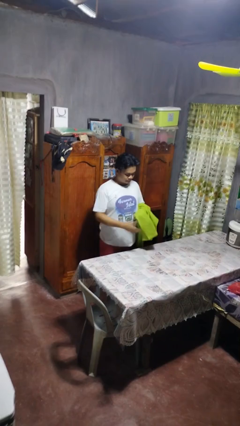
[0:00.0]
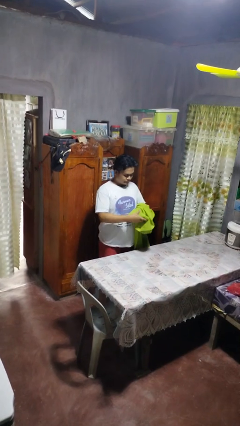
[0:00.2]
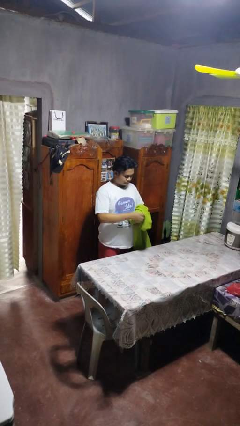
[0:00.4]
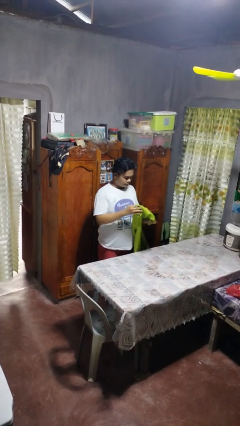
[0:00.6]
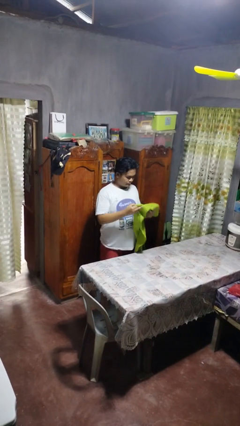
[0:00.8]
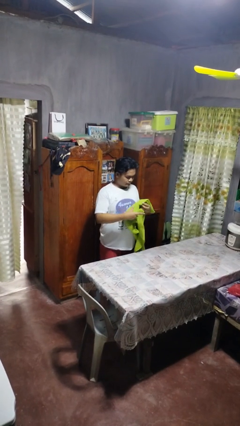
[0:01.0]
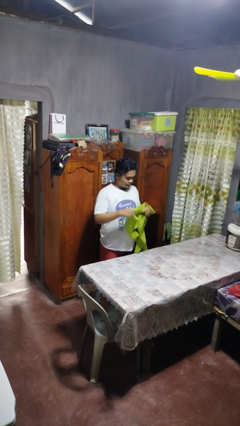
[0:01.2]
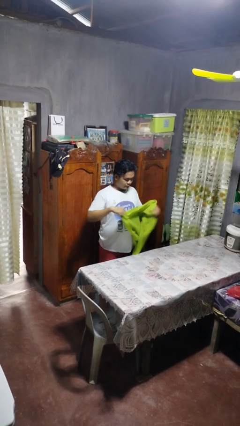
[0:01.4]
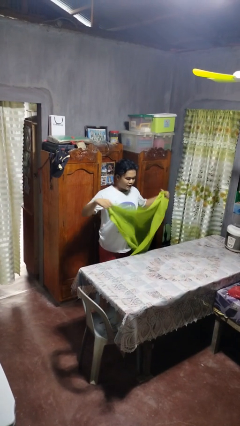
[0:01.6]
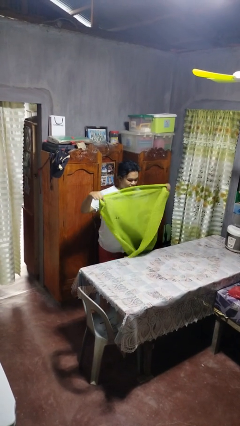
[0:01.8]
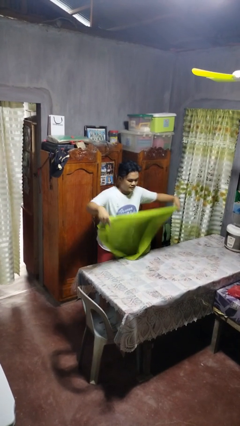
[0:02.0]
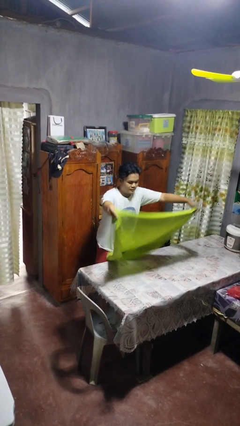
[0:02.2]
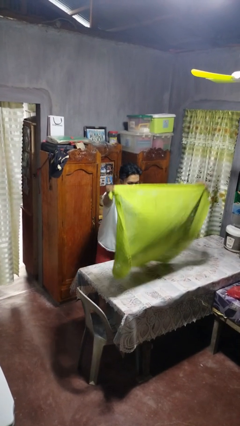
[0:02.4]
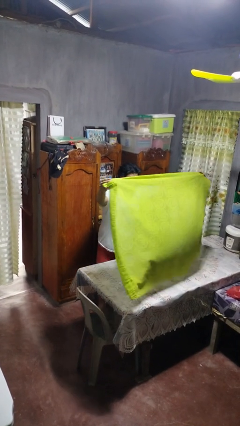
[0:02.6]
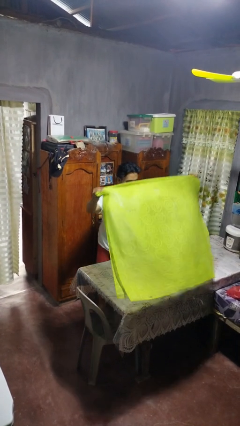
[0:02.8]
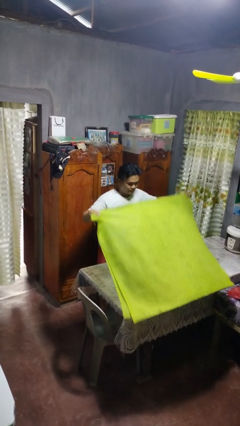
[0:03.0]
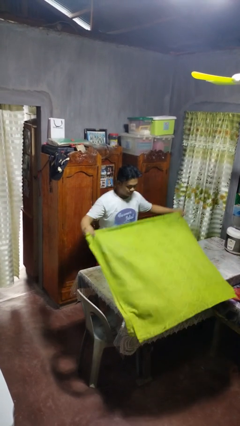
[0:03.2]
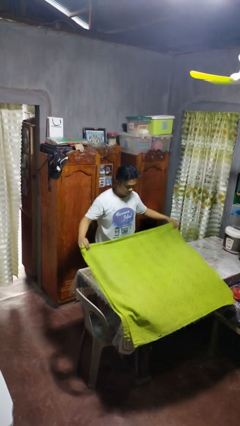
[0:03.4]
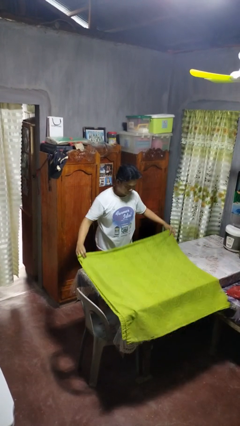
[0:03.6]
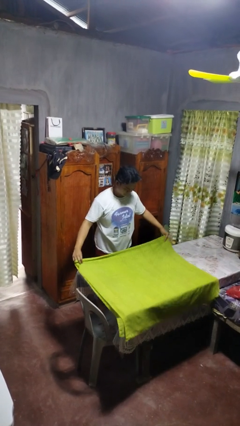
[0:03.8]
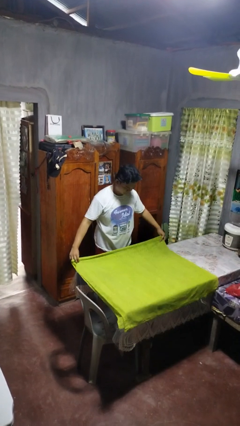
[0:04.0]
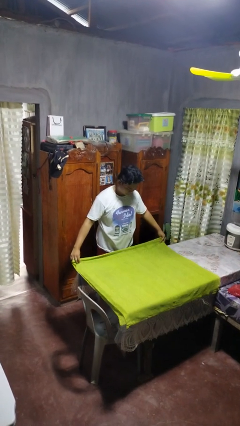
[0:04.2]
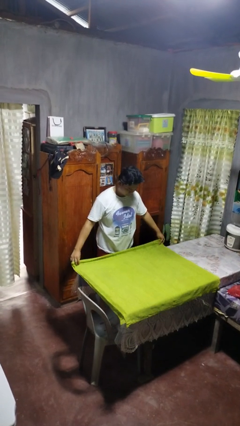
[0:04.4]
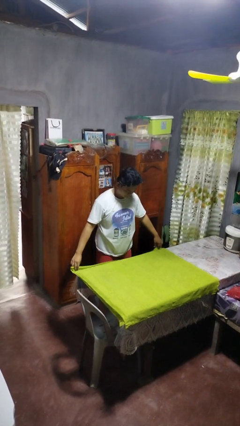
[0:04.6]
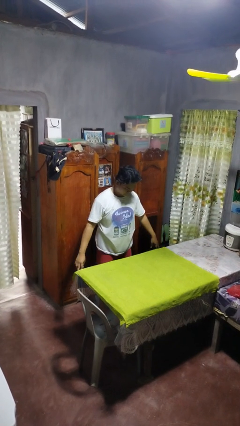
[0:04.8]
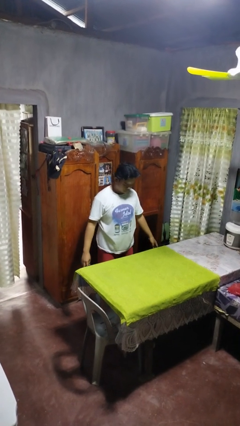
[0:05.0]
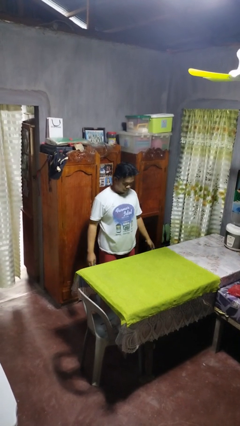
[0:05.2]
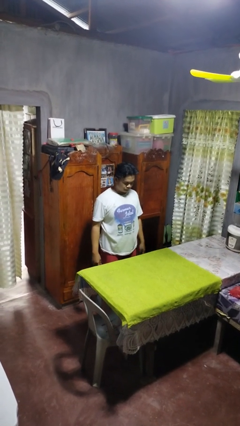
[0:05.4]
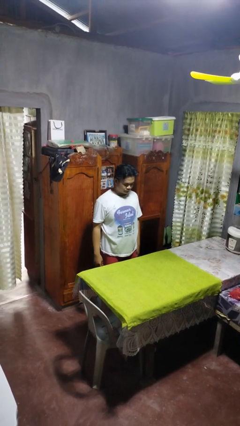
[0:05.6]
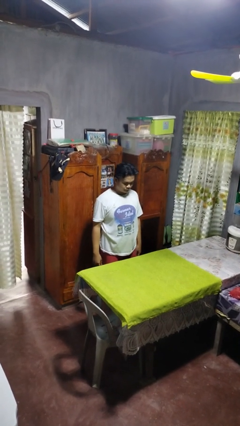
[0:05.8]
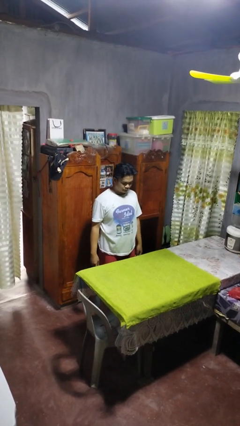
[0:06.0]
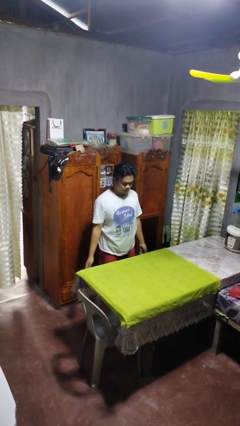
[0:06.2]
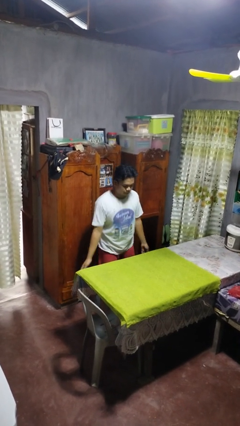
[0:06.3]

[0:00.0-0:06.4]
person spreads tablecloth

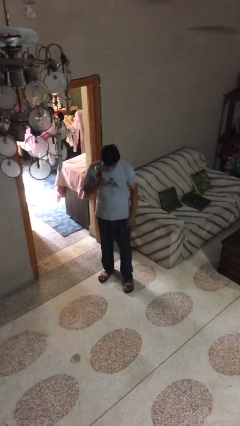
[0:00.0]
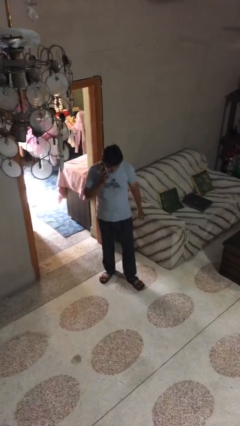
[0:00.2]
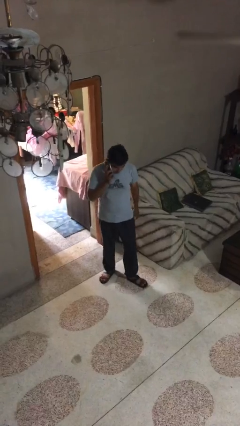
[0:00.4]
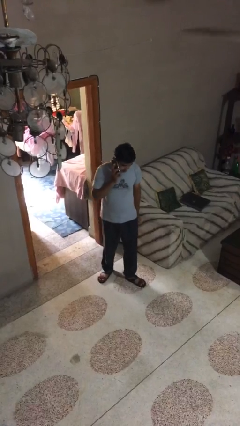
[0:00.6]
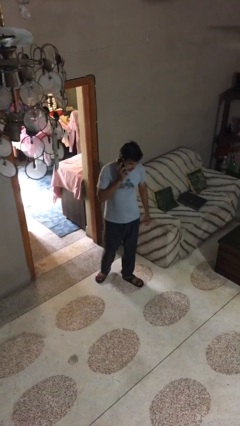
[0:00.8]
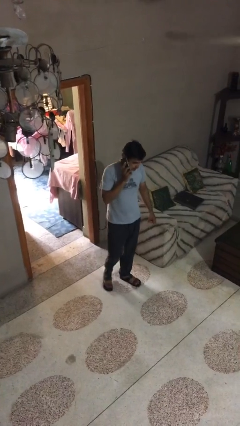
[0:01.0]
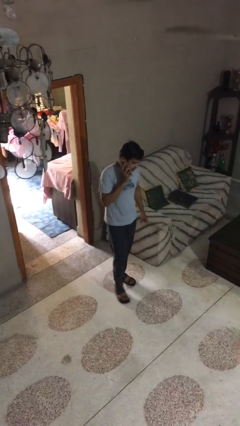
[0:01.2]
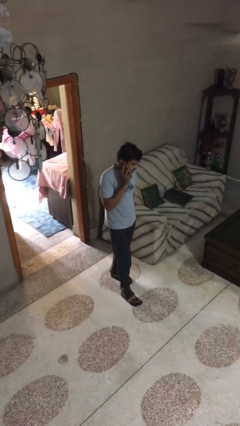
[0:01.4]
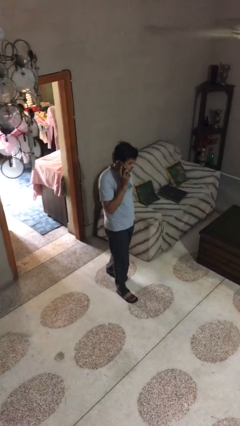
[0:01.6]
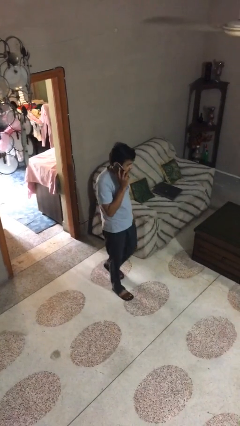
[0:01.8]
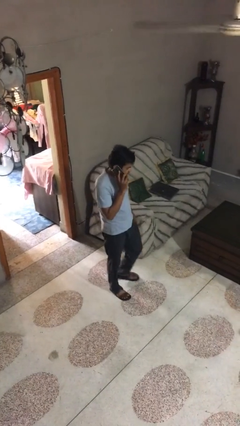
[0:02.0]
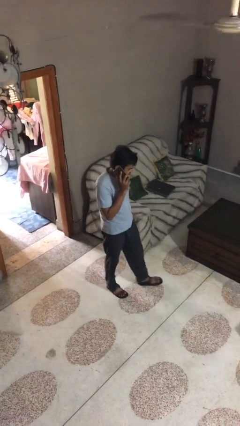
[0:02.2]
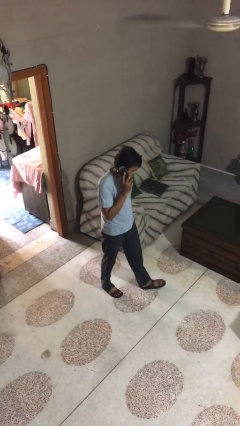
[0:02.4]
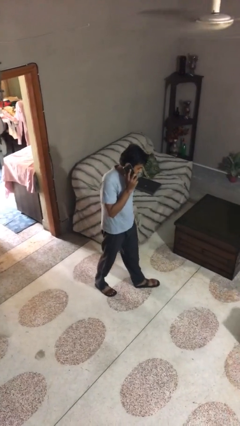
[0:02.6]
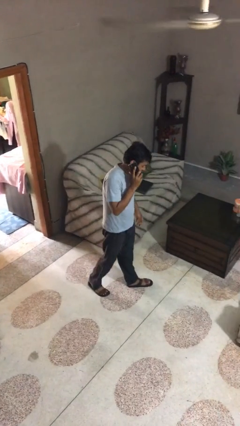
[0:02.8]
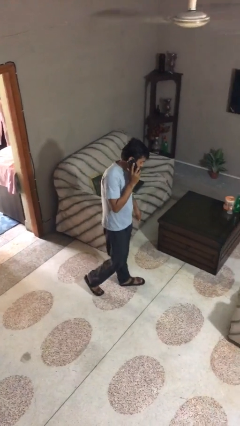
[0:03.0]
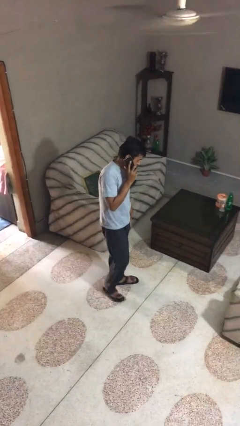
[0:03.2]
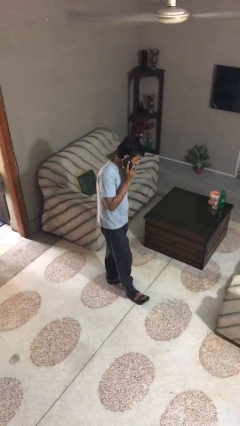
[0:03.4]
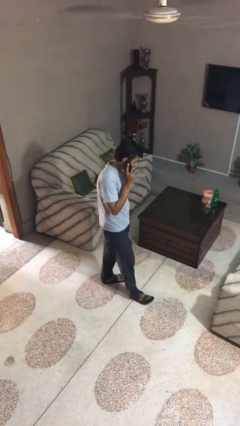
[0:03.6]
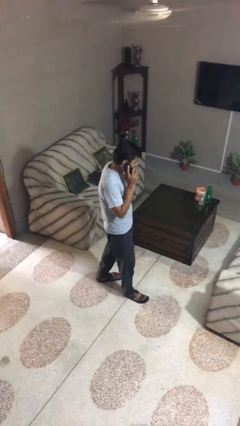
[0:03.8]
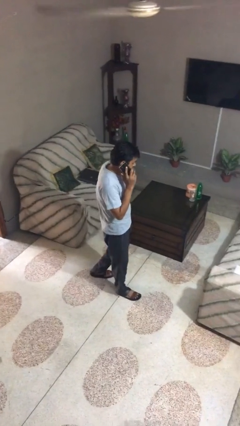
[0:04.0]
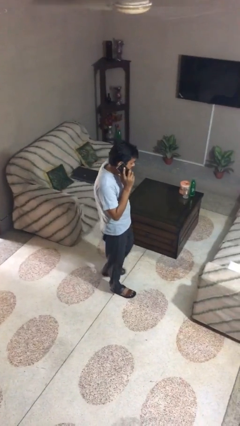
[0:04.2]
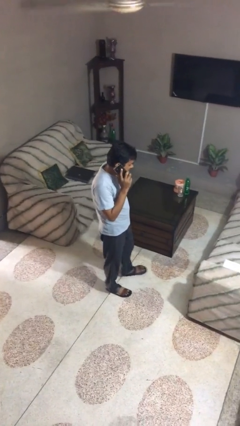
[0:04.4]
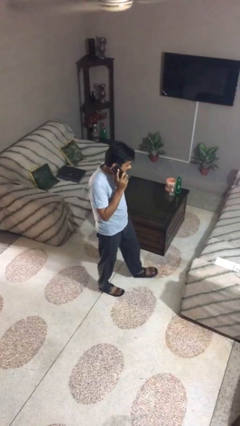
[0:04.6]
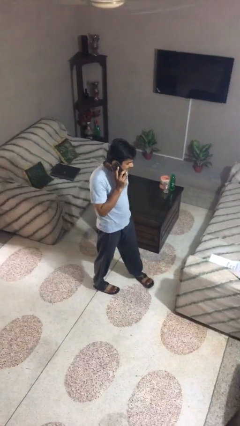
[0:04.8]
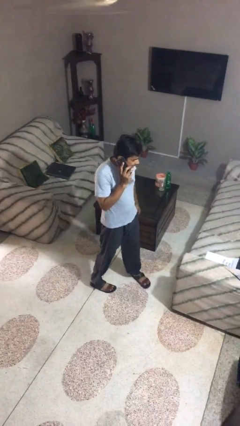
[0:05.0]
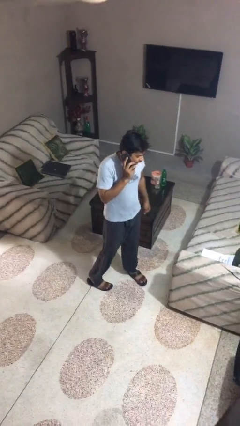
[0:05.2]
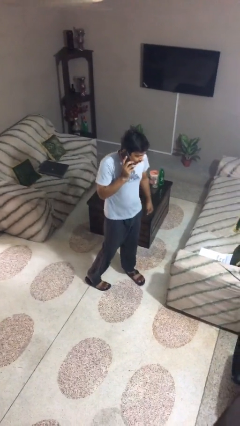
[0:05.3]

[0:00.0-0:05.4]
person talks on phone

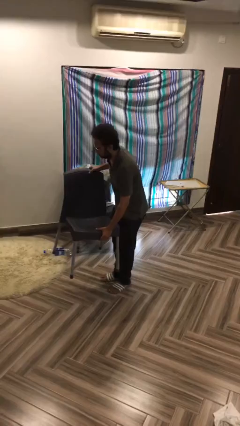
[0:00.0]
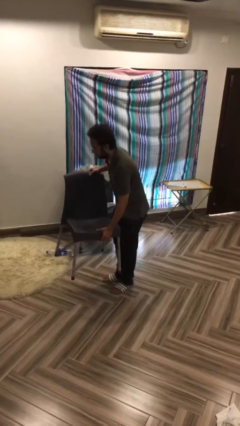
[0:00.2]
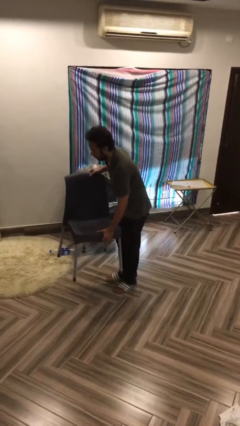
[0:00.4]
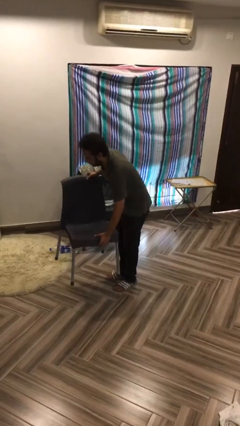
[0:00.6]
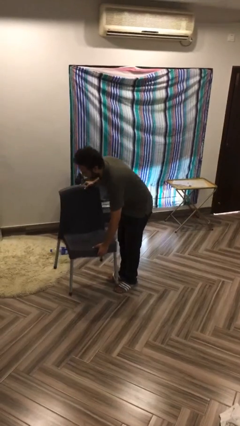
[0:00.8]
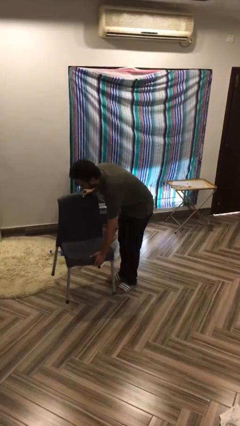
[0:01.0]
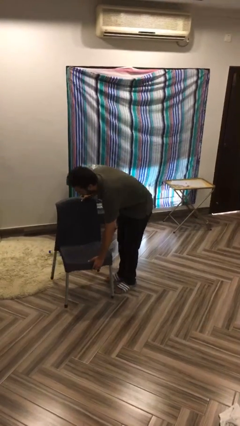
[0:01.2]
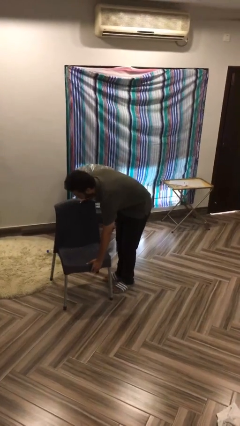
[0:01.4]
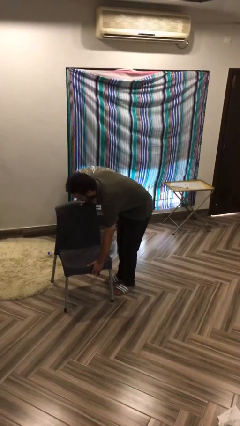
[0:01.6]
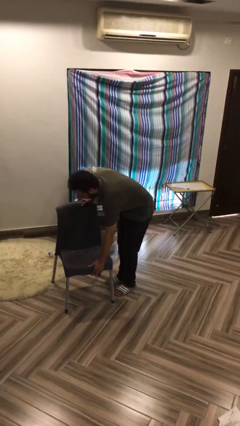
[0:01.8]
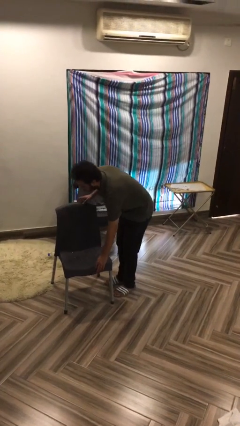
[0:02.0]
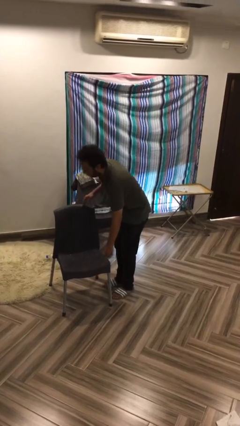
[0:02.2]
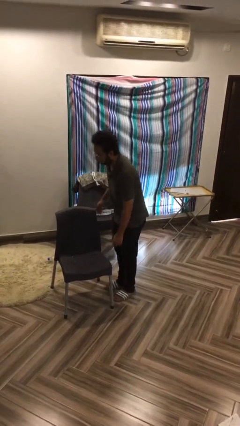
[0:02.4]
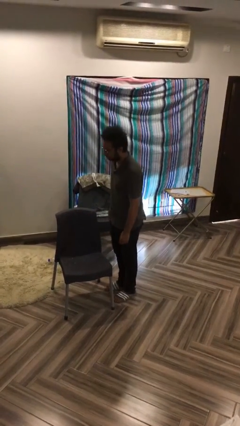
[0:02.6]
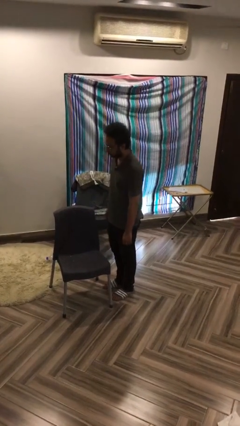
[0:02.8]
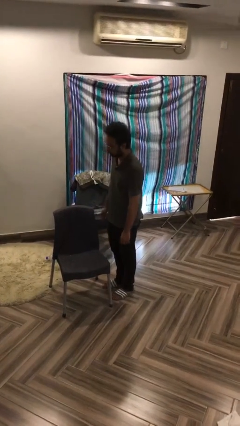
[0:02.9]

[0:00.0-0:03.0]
person puts down object on floor

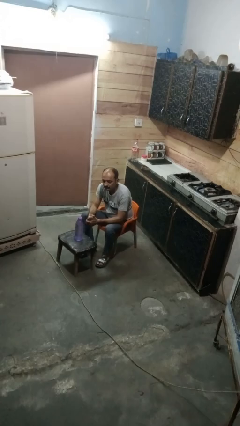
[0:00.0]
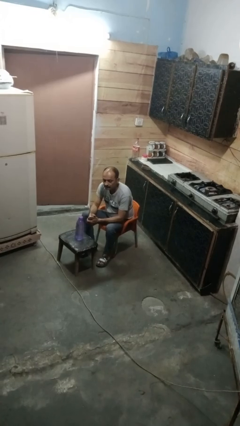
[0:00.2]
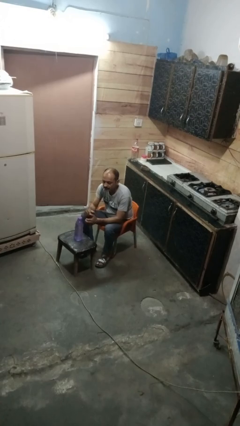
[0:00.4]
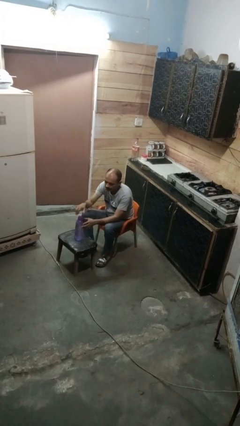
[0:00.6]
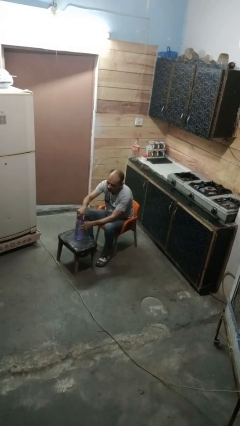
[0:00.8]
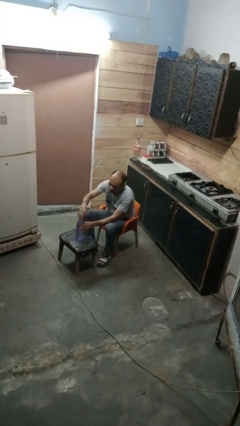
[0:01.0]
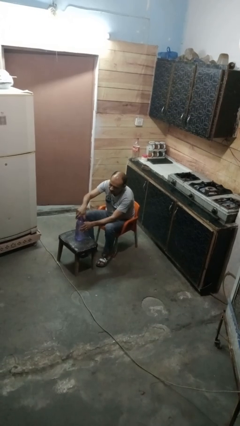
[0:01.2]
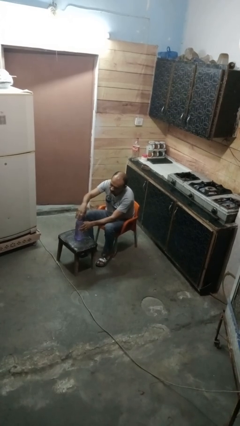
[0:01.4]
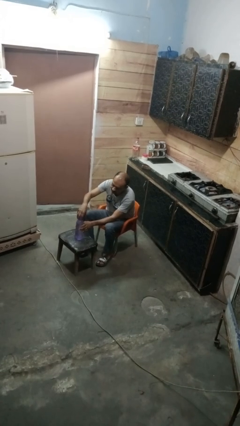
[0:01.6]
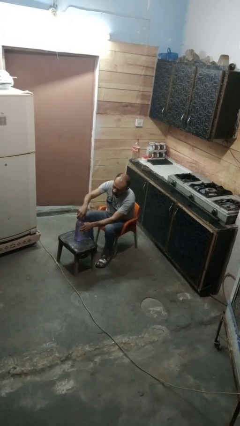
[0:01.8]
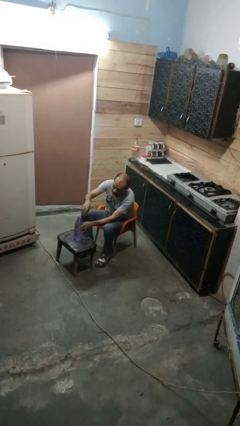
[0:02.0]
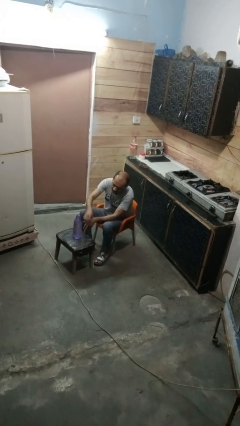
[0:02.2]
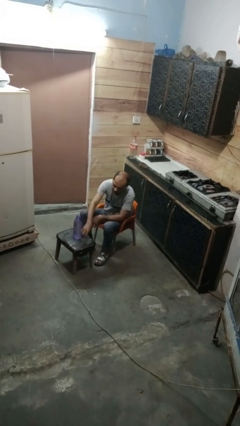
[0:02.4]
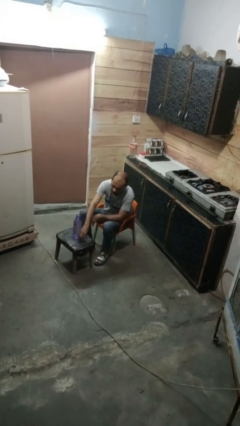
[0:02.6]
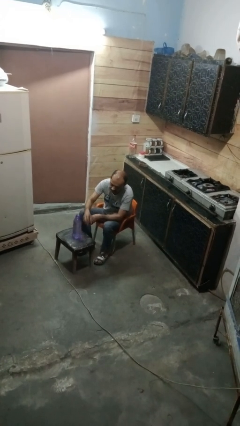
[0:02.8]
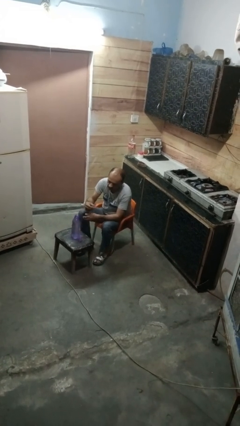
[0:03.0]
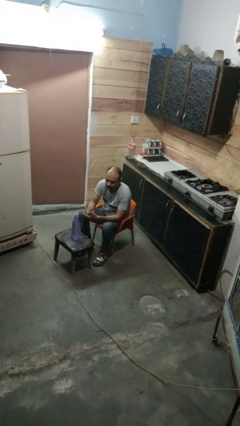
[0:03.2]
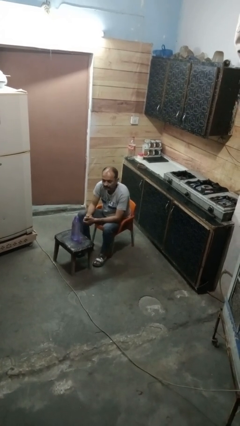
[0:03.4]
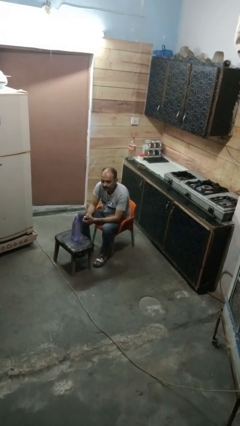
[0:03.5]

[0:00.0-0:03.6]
person unscrews lid from bottle
